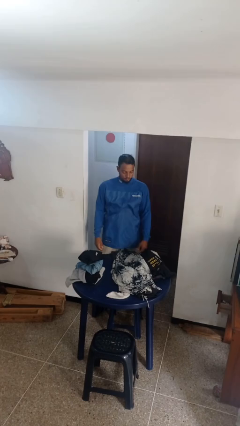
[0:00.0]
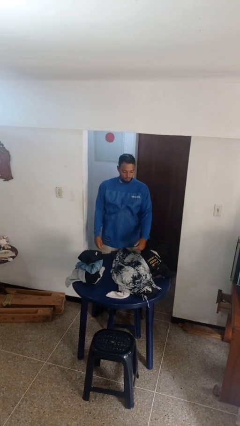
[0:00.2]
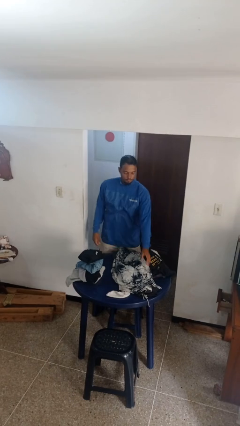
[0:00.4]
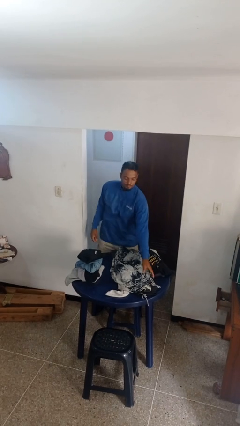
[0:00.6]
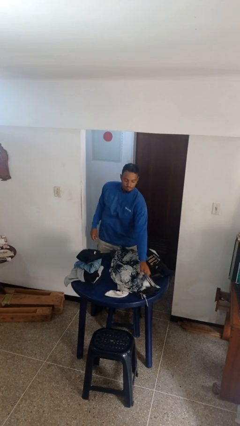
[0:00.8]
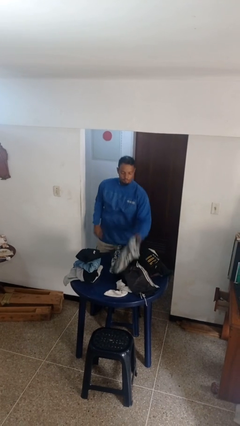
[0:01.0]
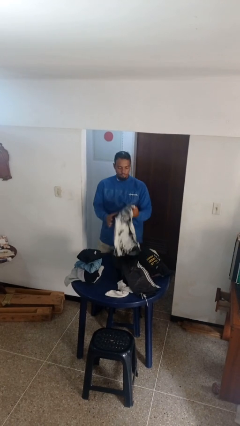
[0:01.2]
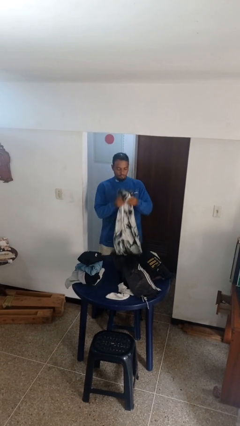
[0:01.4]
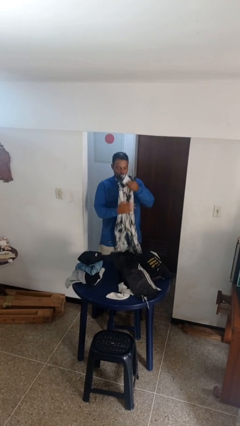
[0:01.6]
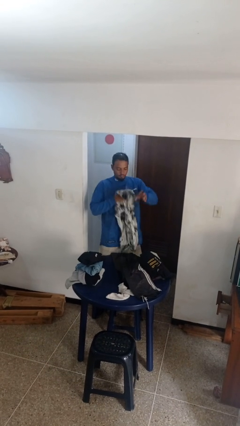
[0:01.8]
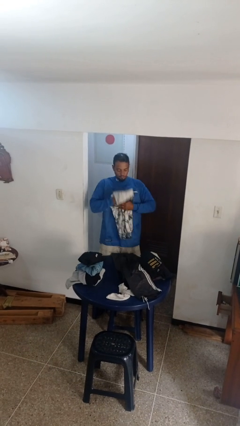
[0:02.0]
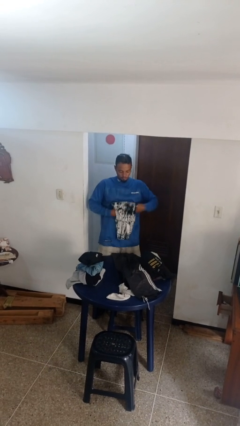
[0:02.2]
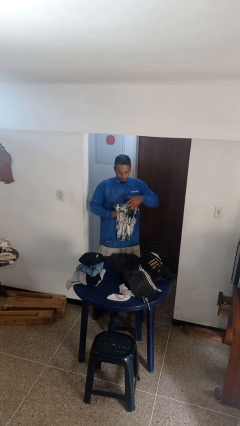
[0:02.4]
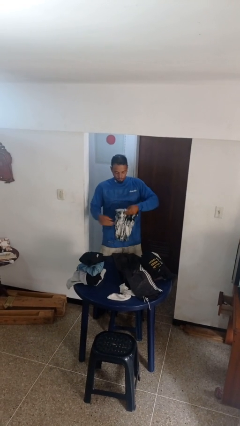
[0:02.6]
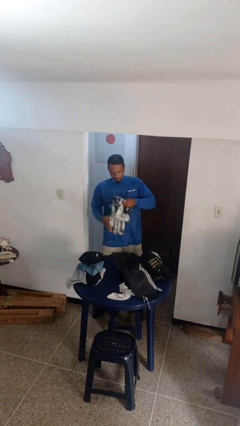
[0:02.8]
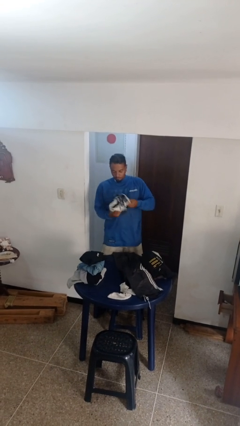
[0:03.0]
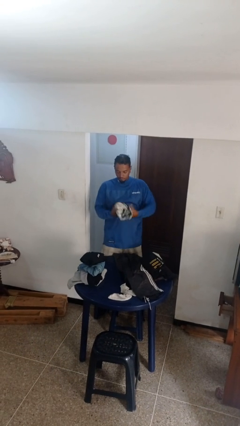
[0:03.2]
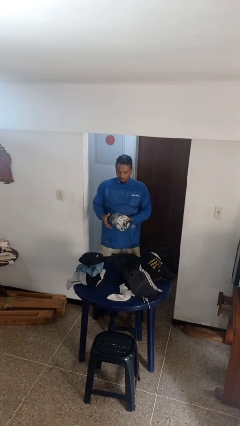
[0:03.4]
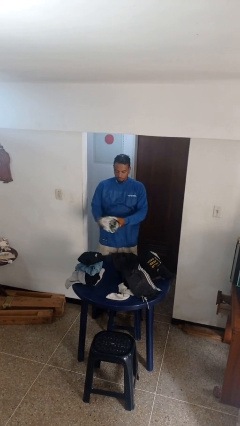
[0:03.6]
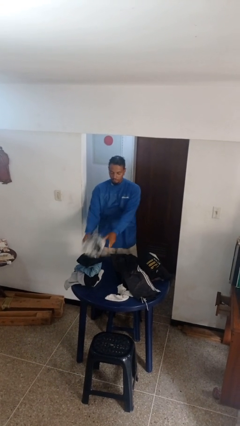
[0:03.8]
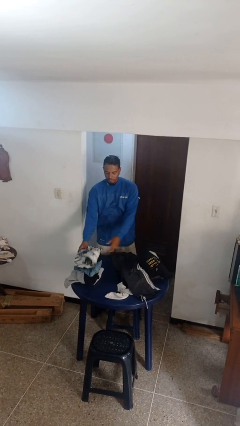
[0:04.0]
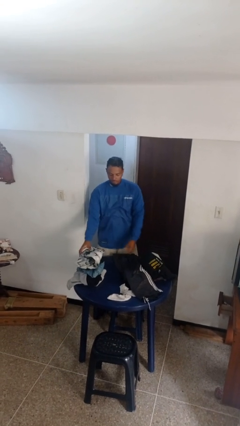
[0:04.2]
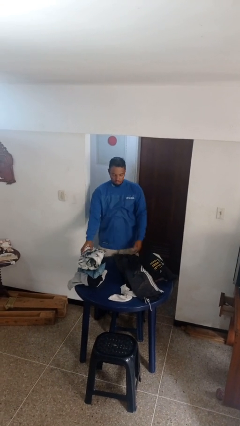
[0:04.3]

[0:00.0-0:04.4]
person folds pants

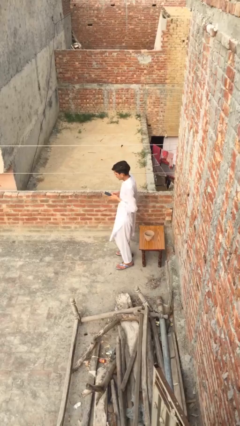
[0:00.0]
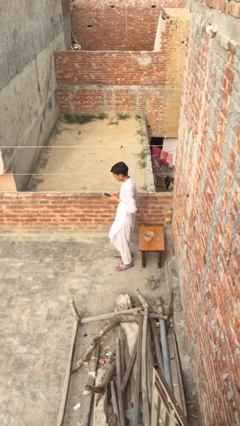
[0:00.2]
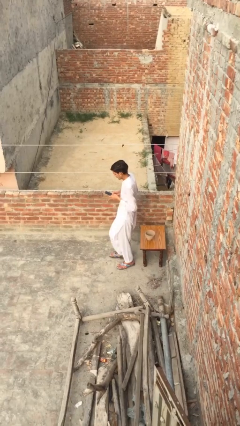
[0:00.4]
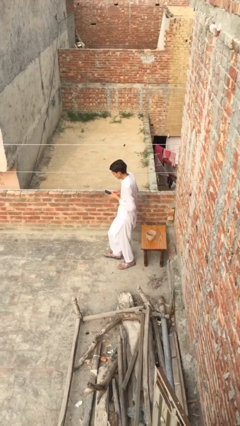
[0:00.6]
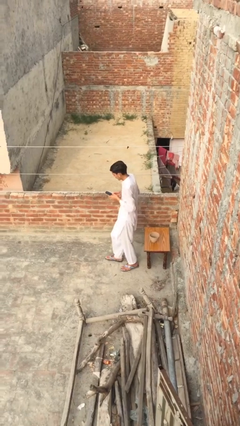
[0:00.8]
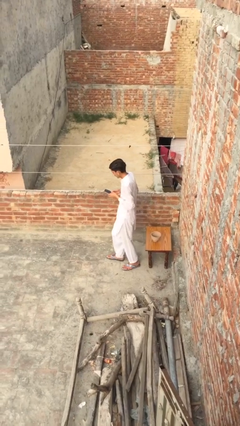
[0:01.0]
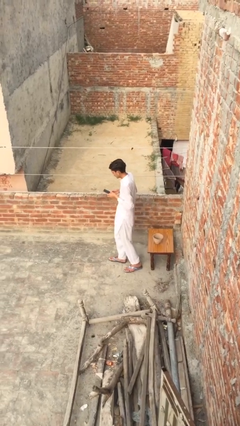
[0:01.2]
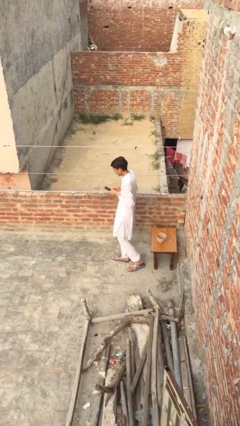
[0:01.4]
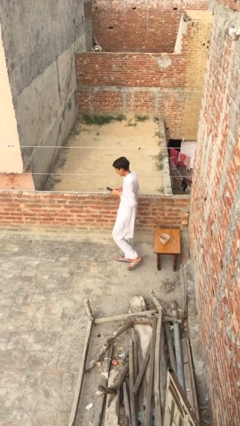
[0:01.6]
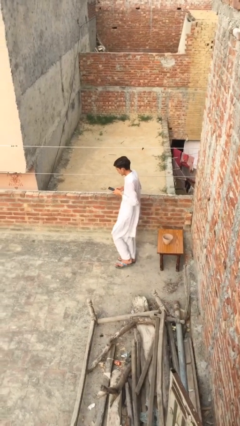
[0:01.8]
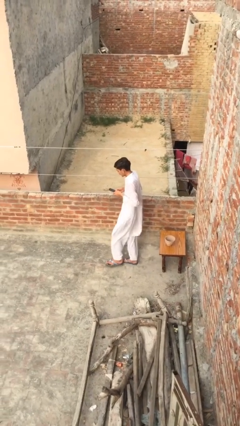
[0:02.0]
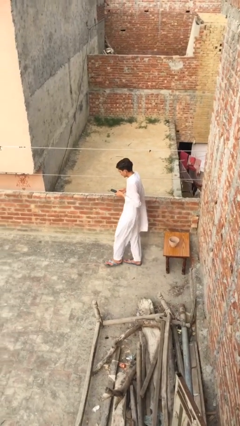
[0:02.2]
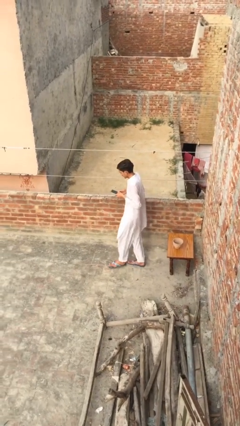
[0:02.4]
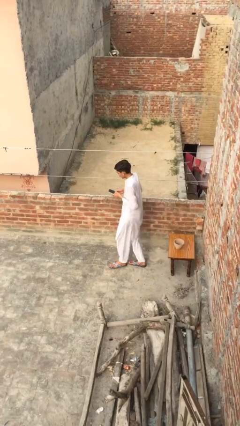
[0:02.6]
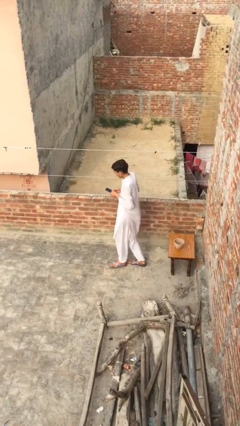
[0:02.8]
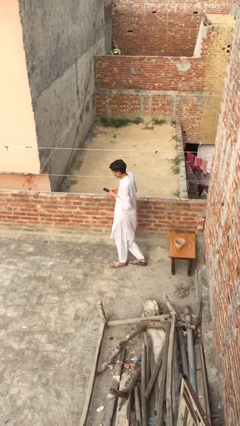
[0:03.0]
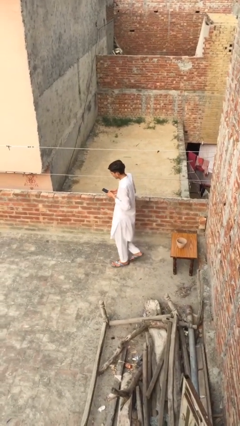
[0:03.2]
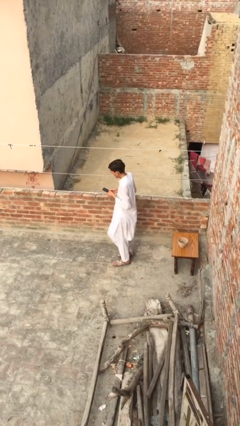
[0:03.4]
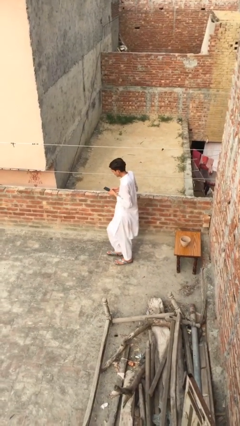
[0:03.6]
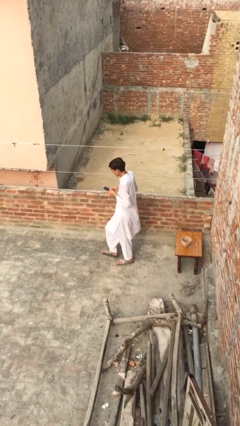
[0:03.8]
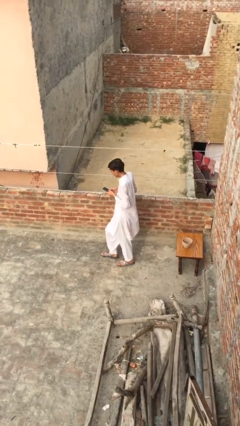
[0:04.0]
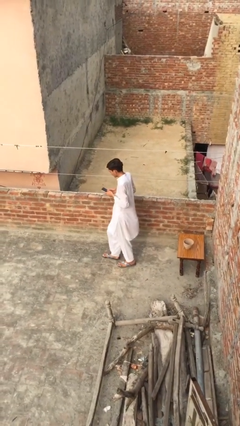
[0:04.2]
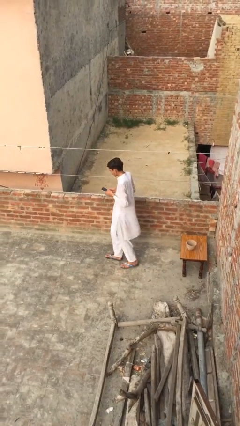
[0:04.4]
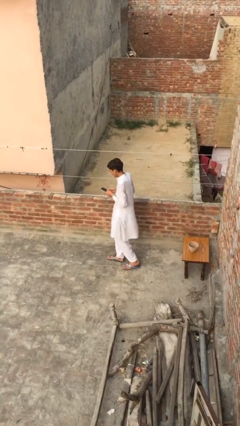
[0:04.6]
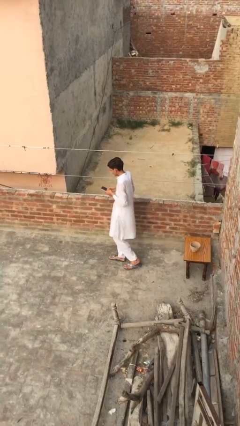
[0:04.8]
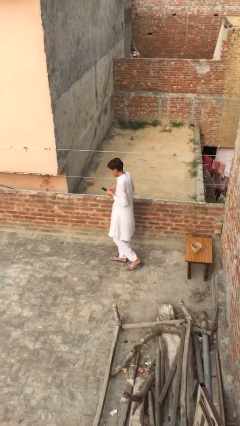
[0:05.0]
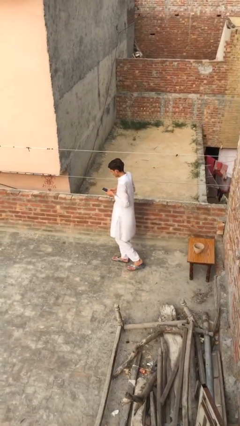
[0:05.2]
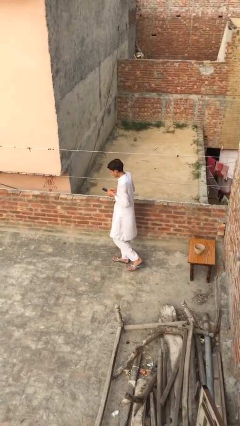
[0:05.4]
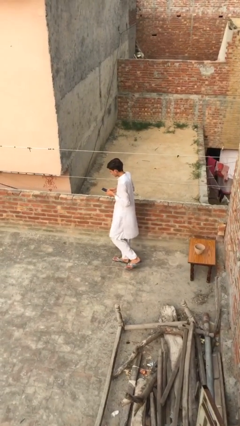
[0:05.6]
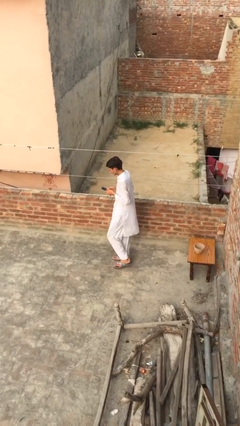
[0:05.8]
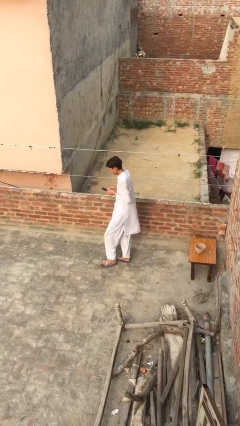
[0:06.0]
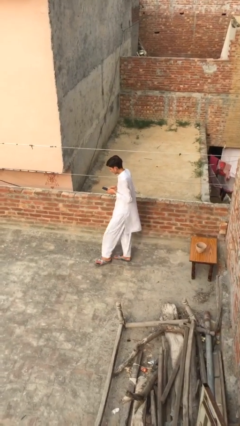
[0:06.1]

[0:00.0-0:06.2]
person texts on phone

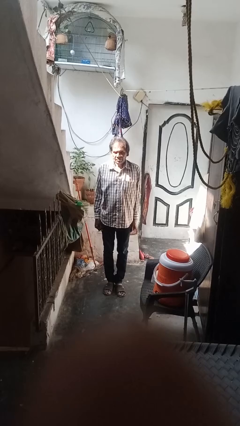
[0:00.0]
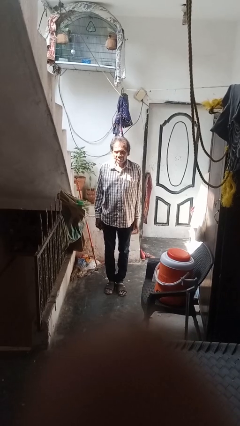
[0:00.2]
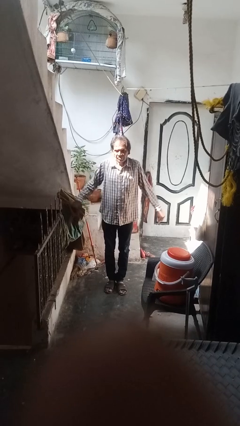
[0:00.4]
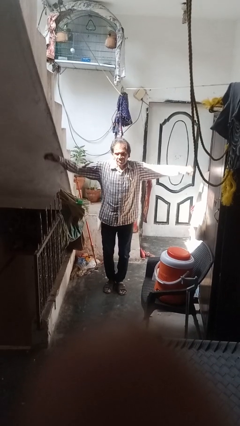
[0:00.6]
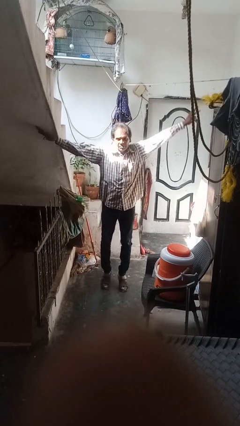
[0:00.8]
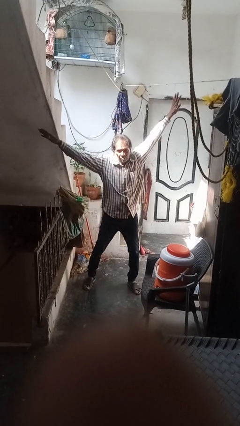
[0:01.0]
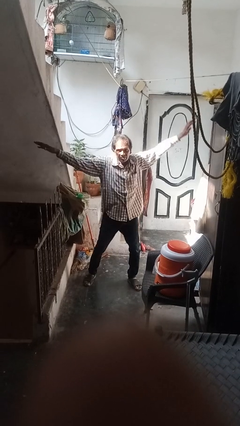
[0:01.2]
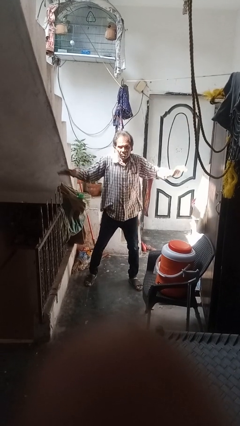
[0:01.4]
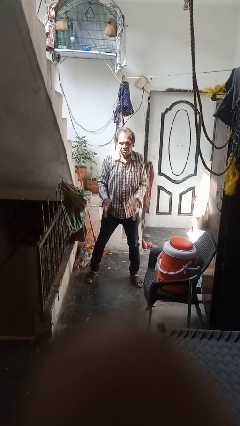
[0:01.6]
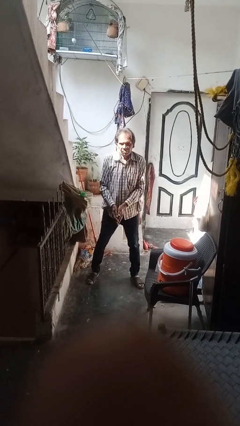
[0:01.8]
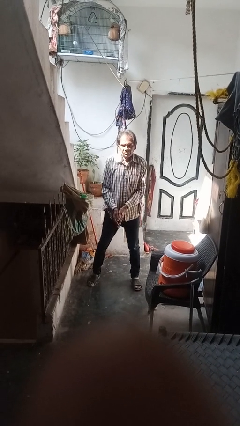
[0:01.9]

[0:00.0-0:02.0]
person exercises with jumping jacks

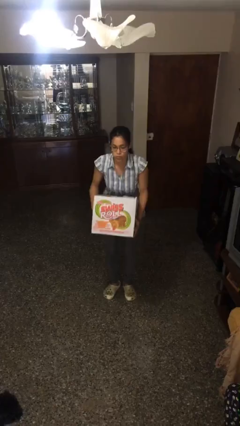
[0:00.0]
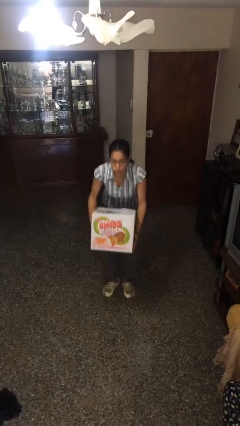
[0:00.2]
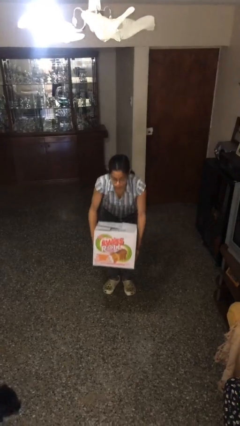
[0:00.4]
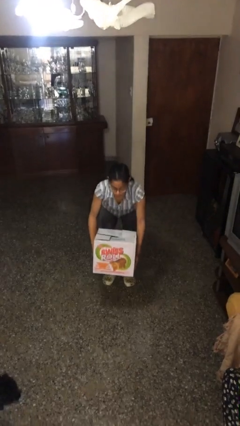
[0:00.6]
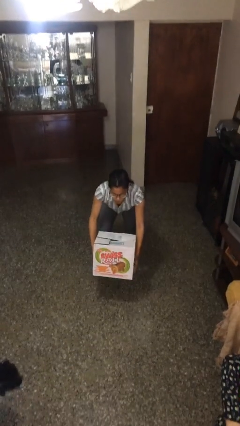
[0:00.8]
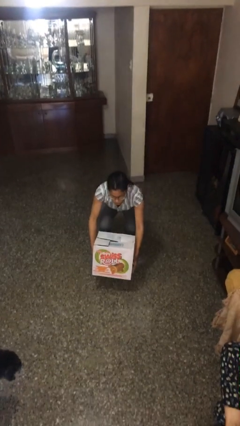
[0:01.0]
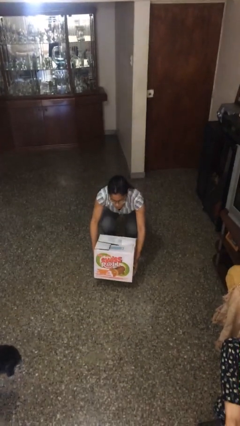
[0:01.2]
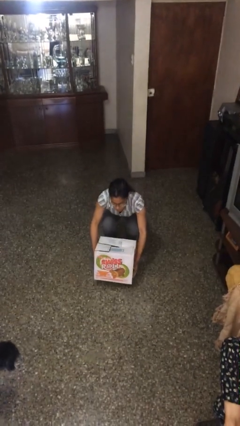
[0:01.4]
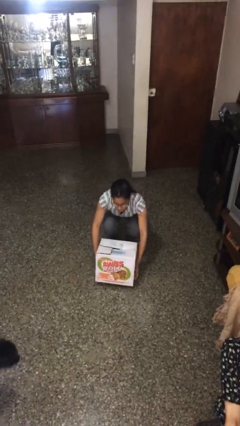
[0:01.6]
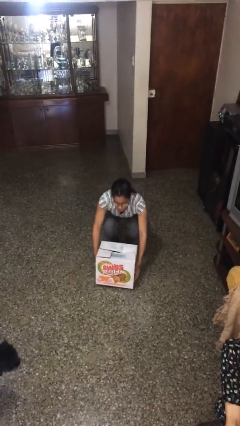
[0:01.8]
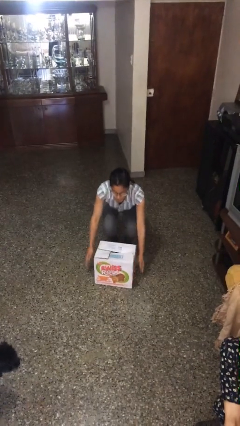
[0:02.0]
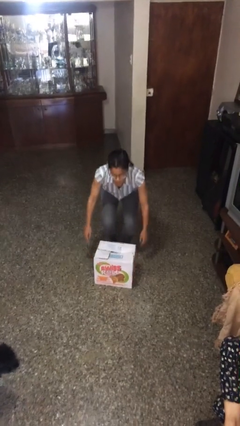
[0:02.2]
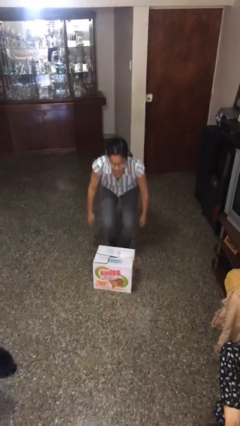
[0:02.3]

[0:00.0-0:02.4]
person puts down object on floor

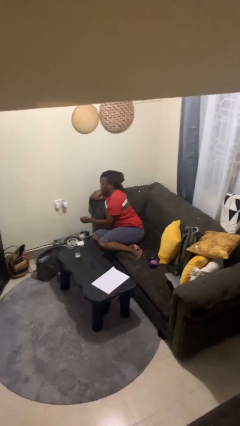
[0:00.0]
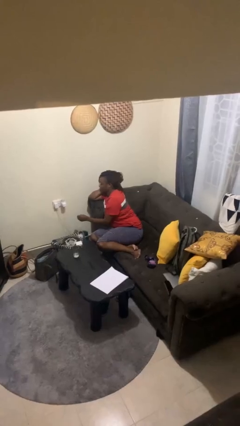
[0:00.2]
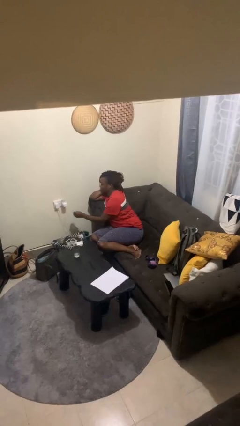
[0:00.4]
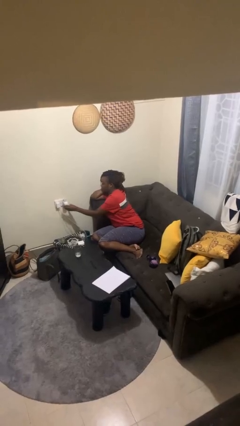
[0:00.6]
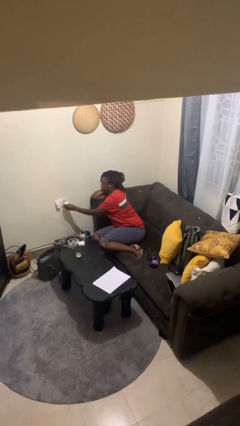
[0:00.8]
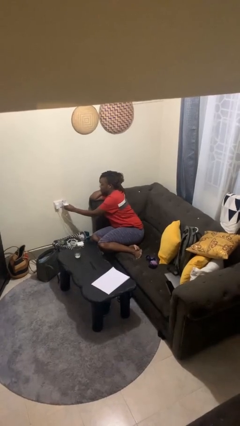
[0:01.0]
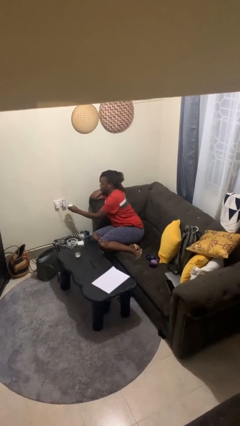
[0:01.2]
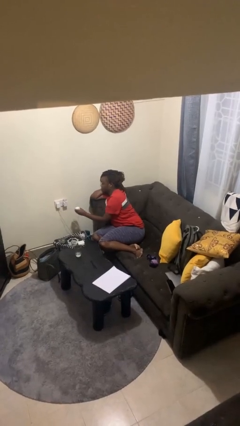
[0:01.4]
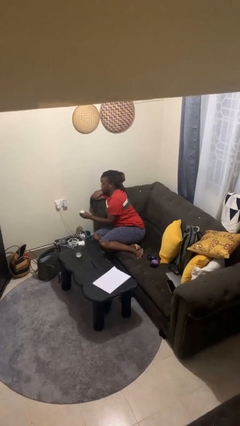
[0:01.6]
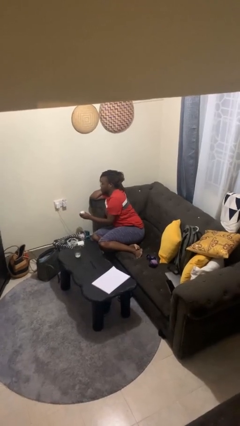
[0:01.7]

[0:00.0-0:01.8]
person unplugs from electrical socket

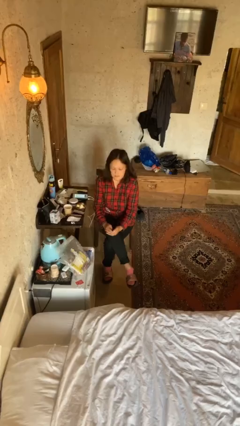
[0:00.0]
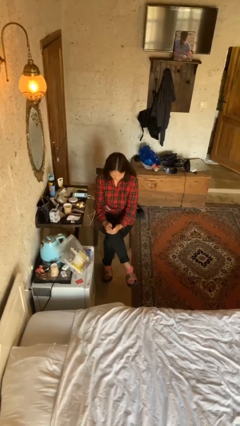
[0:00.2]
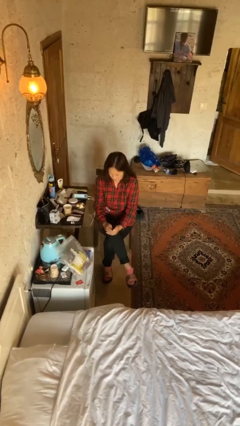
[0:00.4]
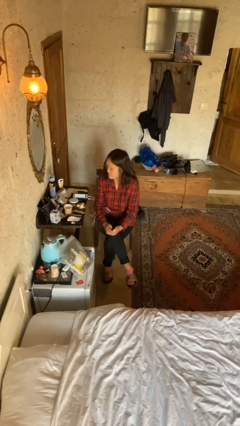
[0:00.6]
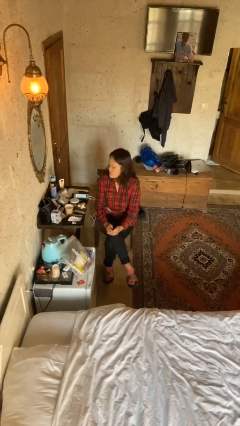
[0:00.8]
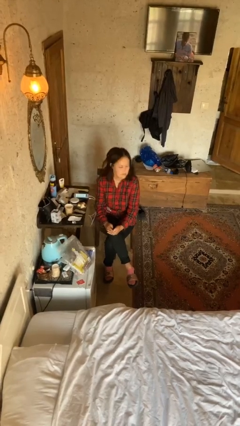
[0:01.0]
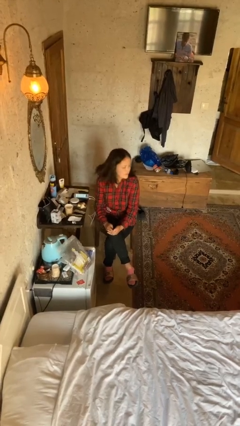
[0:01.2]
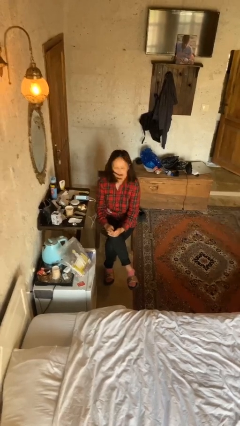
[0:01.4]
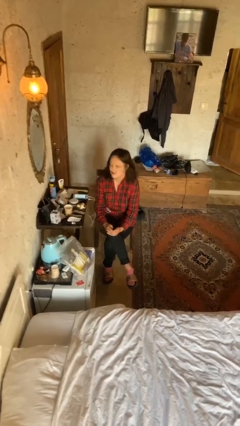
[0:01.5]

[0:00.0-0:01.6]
person shakes head
